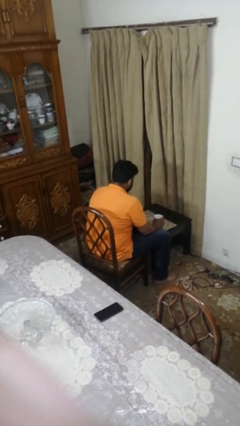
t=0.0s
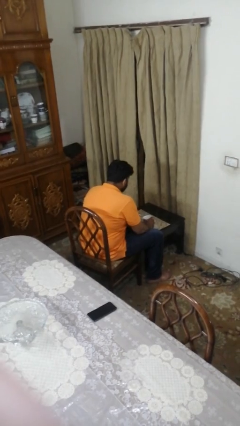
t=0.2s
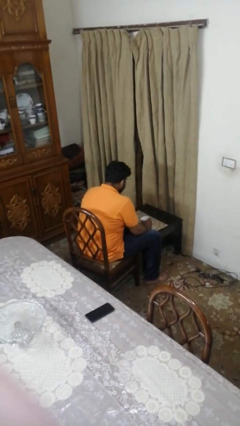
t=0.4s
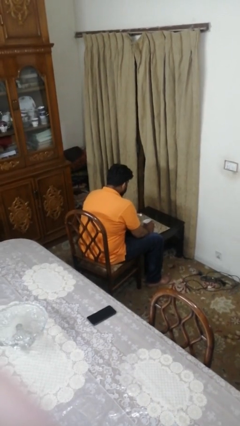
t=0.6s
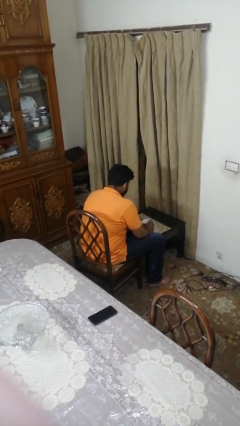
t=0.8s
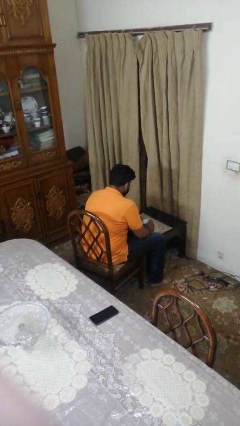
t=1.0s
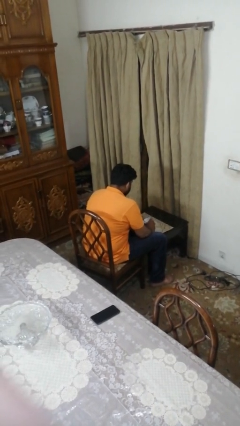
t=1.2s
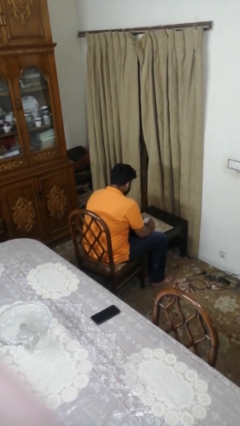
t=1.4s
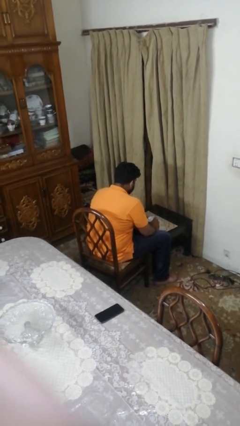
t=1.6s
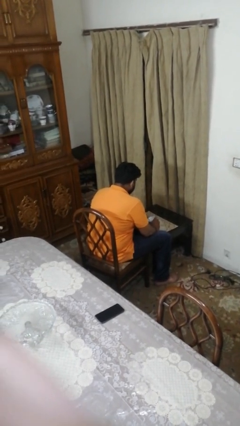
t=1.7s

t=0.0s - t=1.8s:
person stirs mug

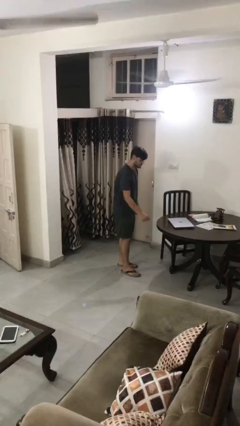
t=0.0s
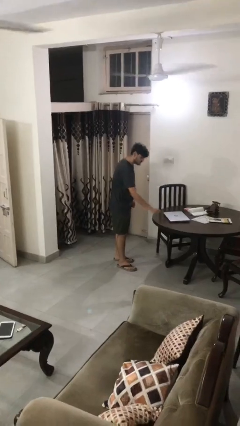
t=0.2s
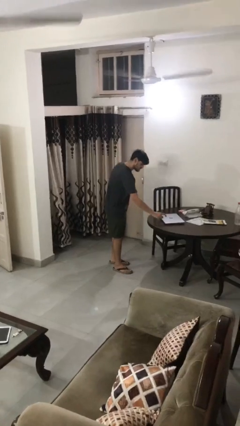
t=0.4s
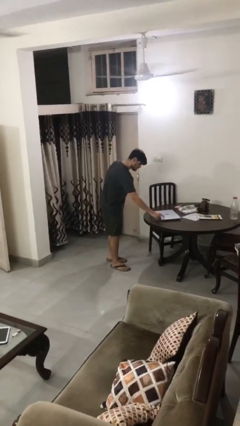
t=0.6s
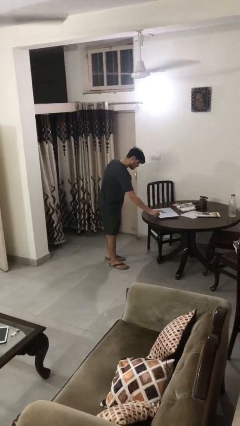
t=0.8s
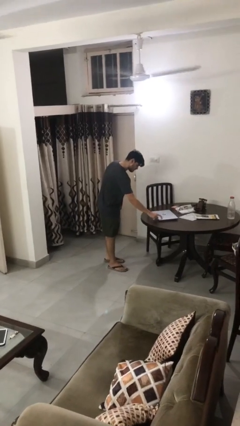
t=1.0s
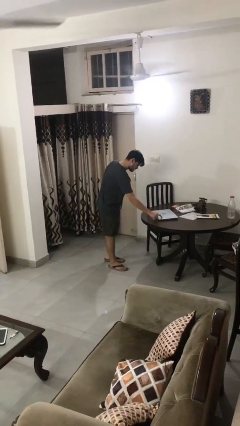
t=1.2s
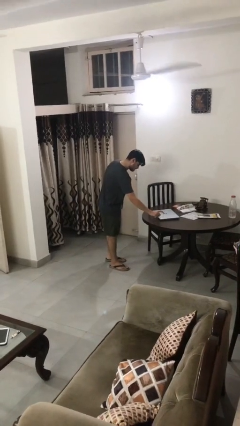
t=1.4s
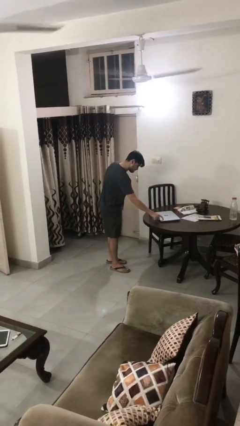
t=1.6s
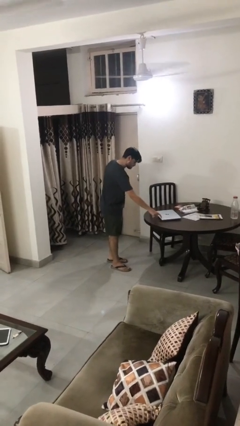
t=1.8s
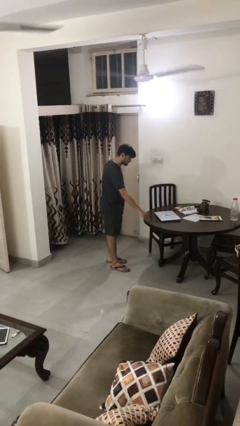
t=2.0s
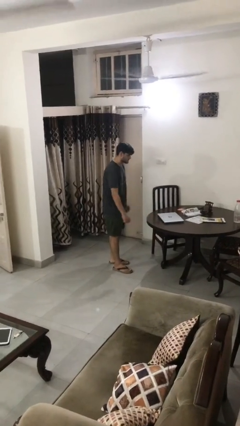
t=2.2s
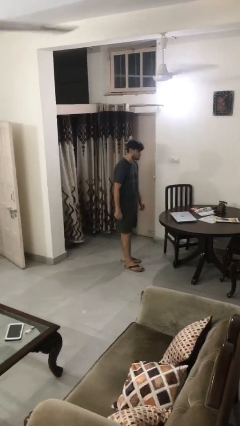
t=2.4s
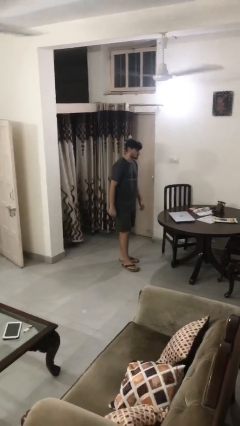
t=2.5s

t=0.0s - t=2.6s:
person taps object with finger

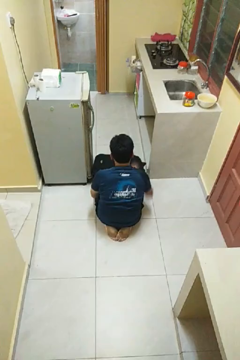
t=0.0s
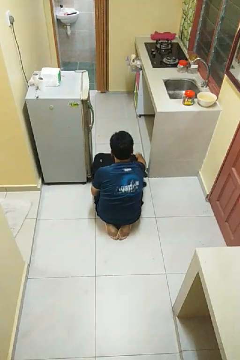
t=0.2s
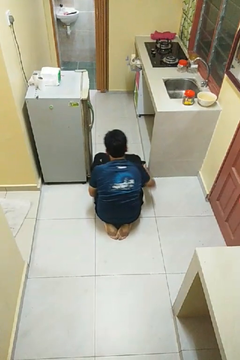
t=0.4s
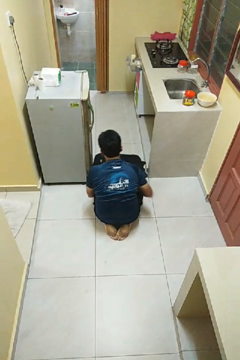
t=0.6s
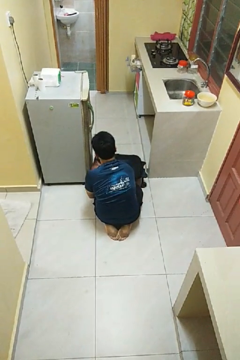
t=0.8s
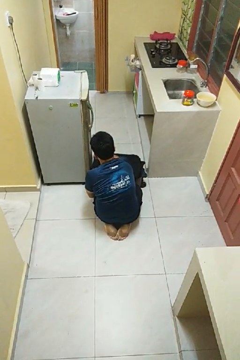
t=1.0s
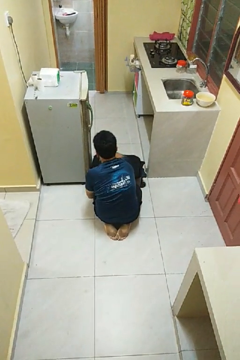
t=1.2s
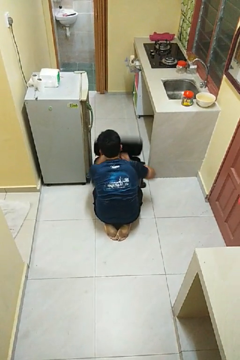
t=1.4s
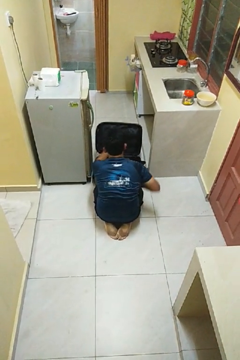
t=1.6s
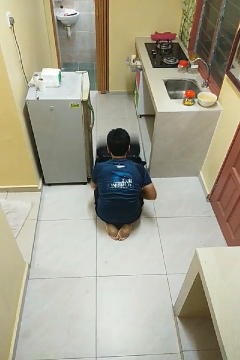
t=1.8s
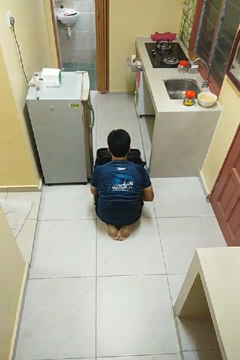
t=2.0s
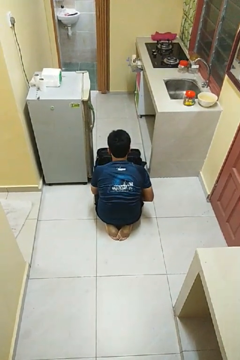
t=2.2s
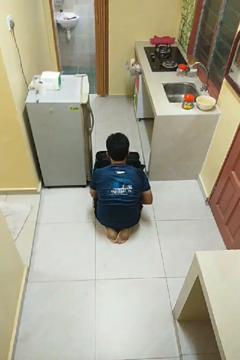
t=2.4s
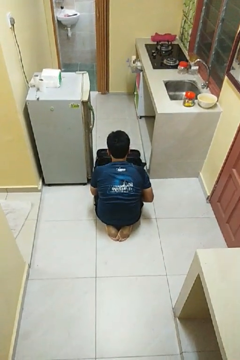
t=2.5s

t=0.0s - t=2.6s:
person opens suitcase

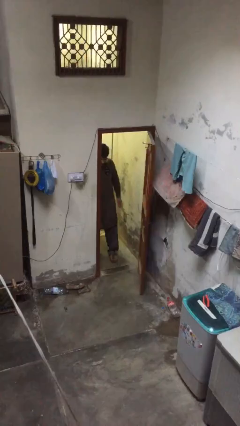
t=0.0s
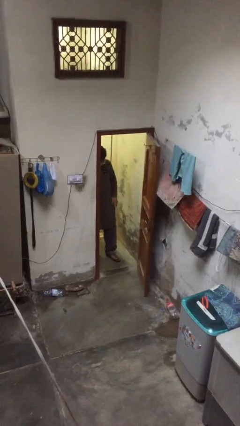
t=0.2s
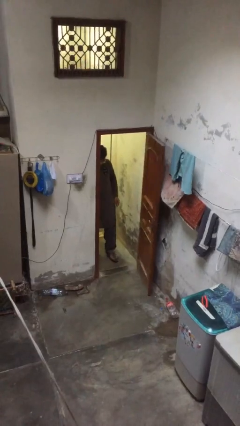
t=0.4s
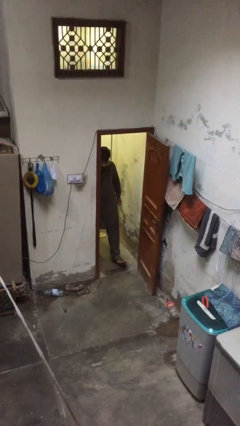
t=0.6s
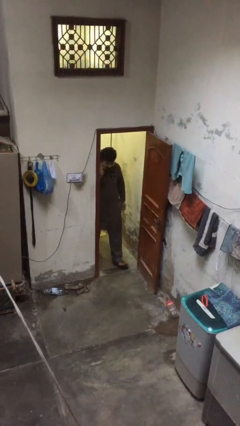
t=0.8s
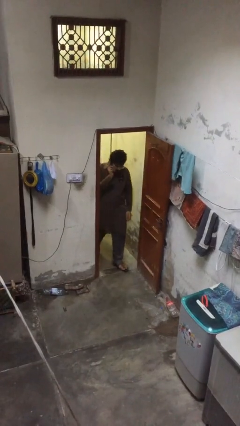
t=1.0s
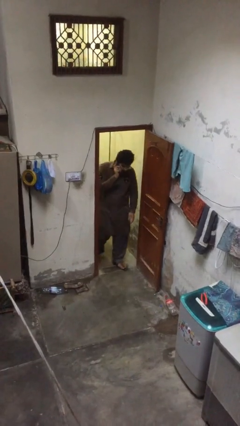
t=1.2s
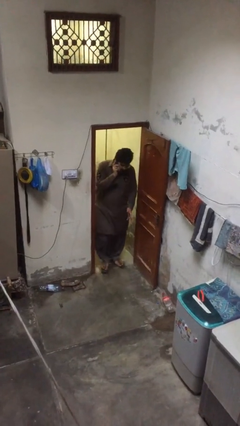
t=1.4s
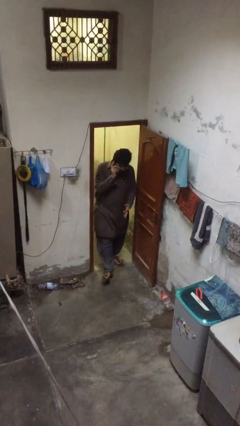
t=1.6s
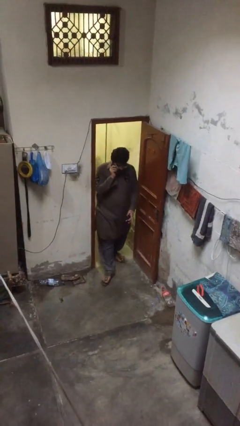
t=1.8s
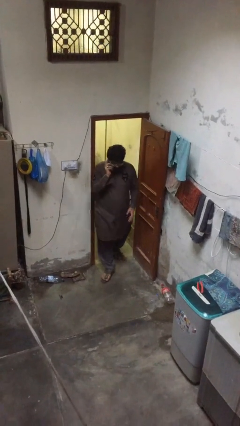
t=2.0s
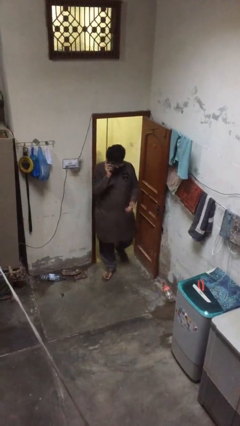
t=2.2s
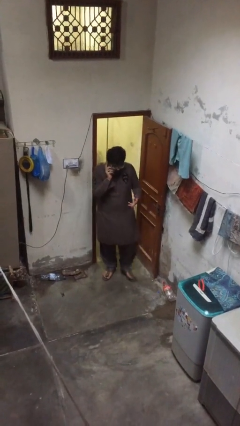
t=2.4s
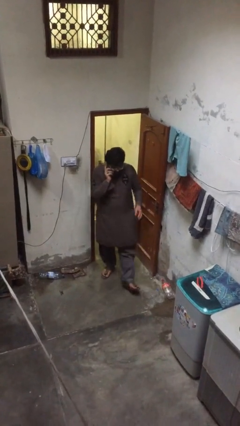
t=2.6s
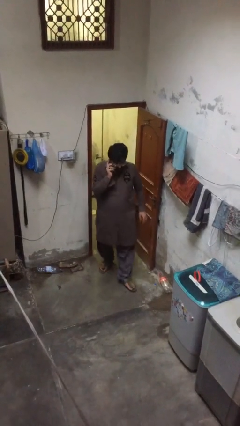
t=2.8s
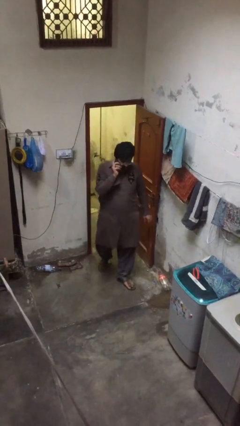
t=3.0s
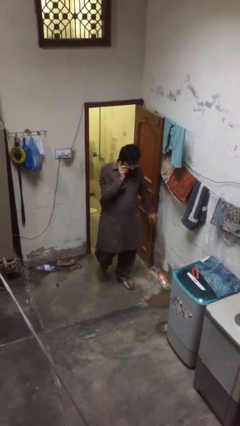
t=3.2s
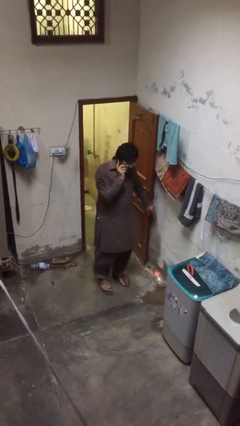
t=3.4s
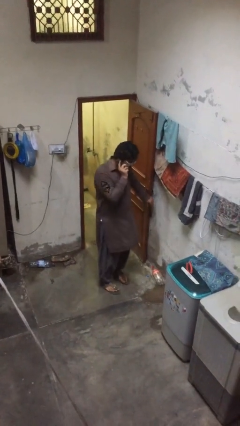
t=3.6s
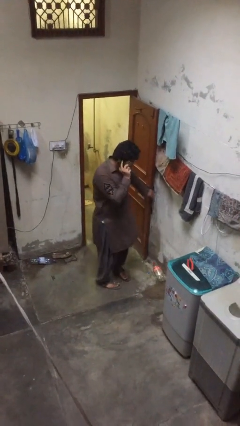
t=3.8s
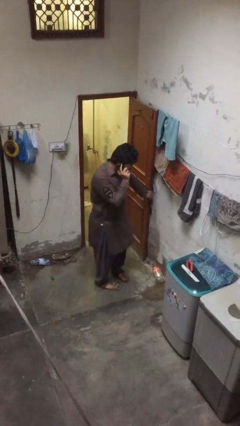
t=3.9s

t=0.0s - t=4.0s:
person enters scene through structure

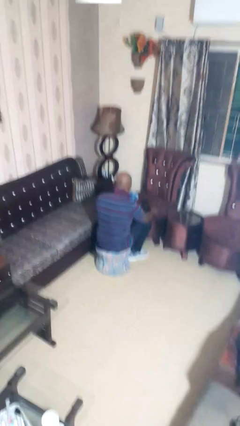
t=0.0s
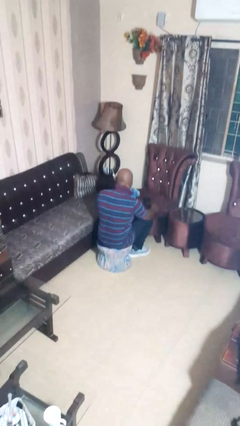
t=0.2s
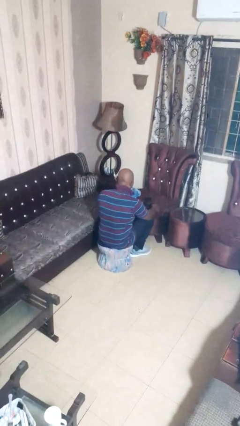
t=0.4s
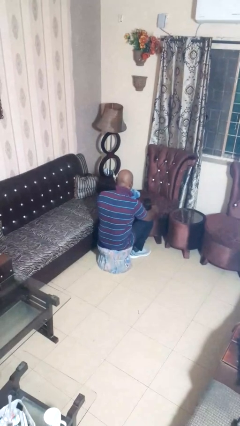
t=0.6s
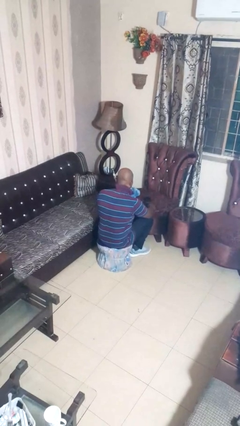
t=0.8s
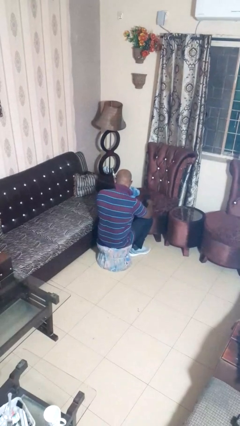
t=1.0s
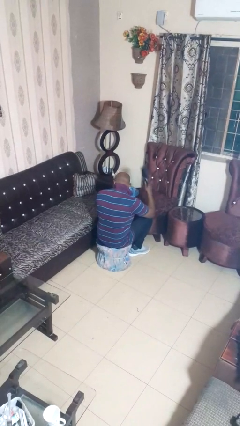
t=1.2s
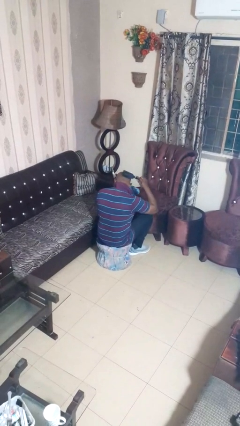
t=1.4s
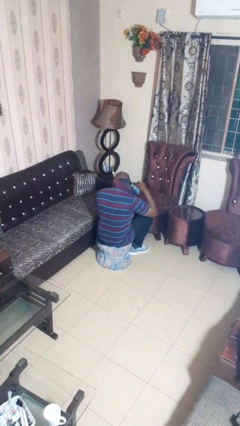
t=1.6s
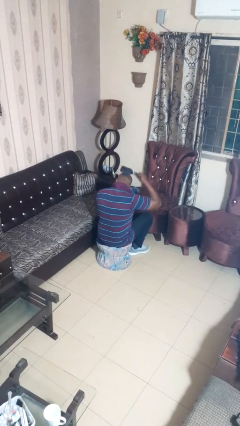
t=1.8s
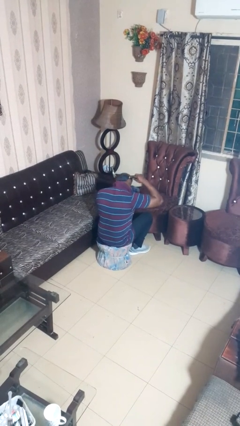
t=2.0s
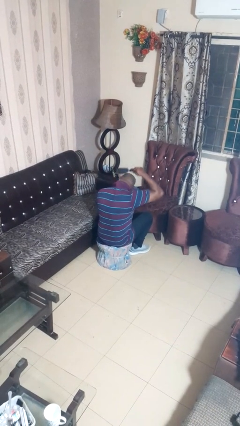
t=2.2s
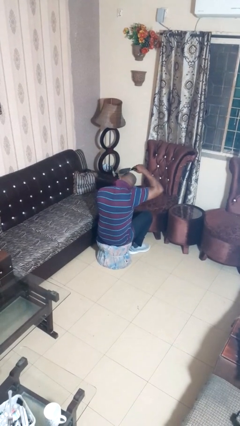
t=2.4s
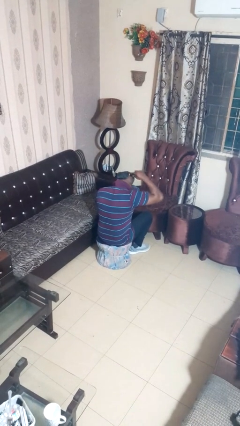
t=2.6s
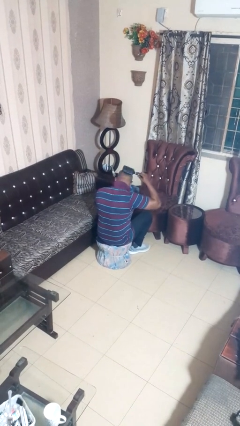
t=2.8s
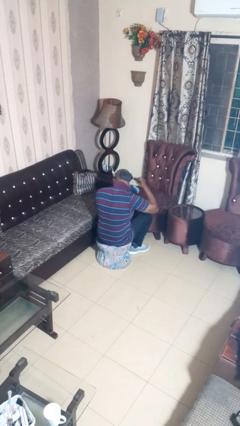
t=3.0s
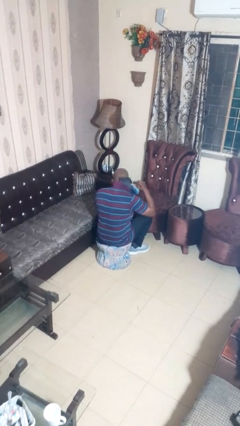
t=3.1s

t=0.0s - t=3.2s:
person brushes hair

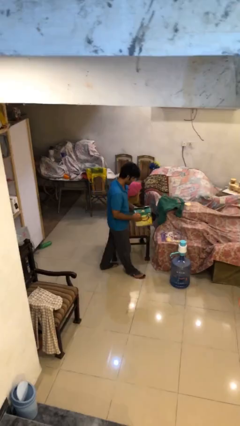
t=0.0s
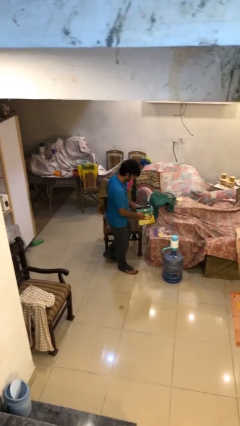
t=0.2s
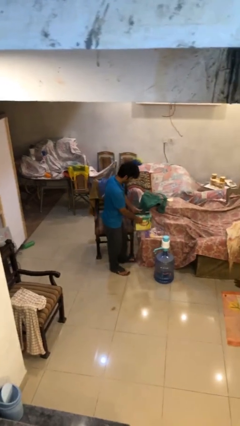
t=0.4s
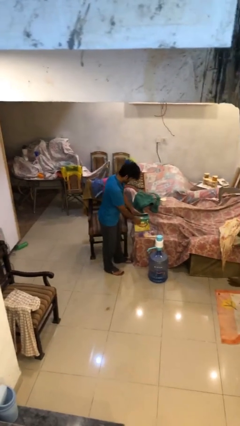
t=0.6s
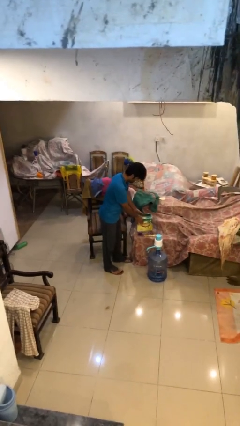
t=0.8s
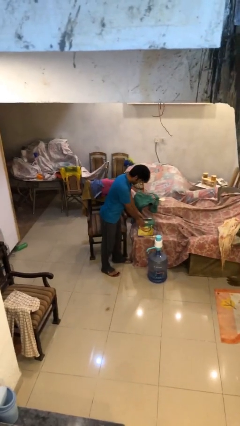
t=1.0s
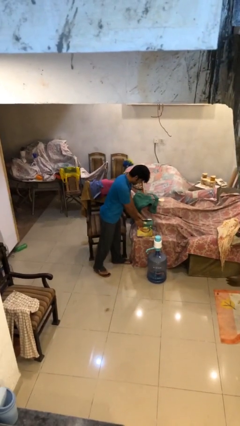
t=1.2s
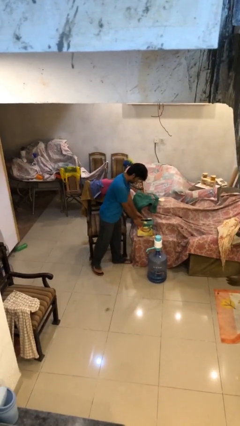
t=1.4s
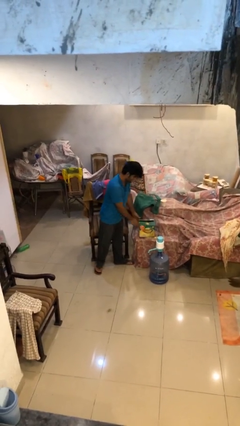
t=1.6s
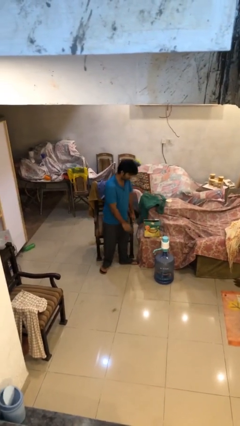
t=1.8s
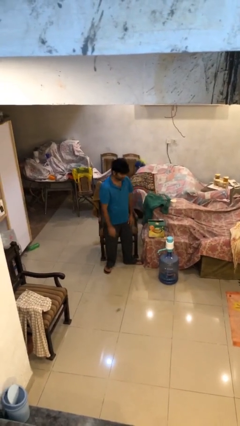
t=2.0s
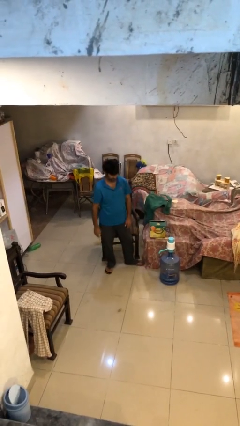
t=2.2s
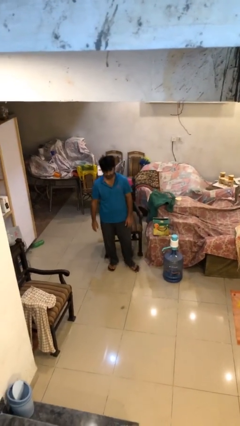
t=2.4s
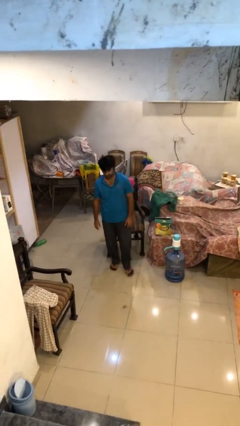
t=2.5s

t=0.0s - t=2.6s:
person puts down object on table

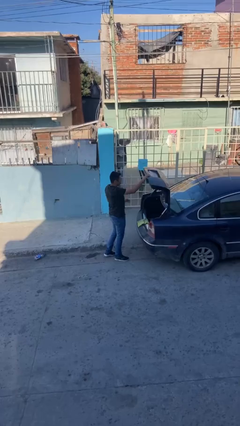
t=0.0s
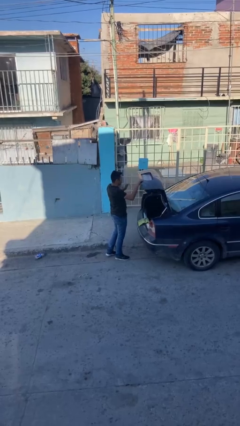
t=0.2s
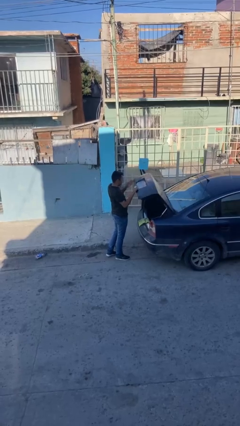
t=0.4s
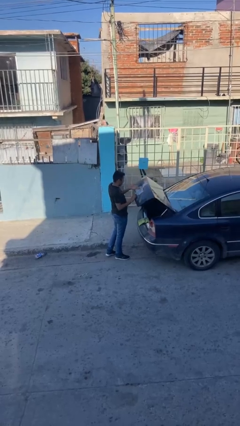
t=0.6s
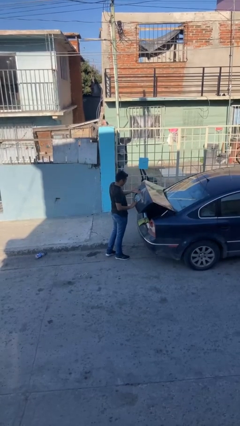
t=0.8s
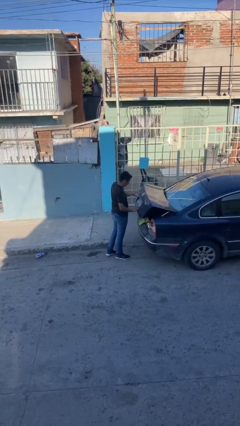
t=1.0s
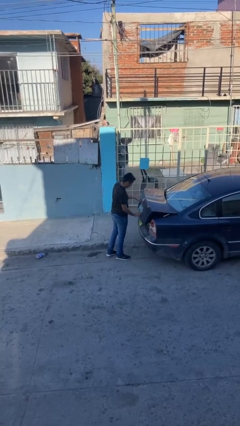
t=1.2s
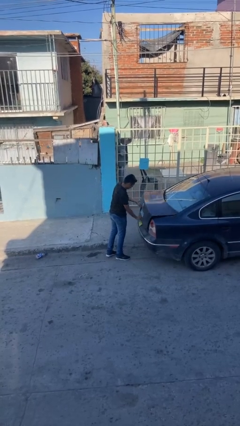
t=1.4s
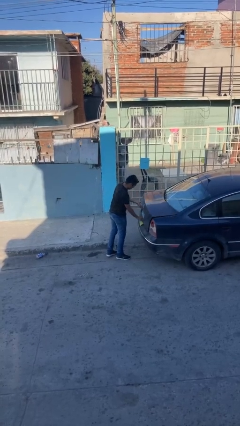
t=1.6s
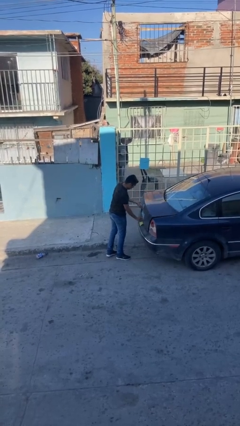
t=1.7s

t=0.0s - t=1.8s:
person closes car trunk
